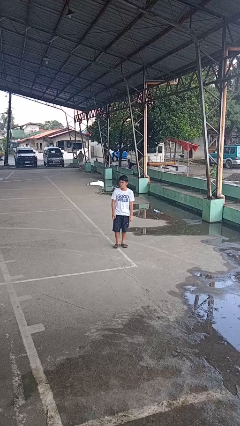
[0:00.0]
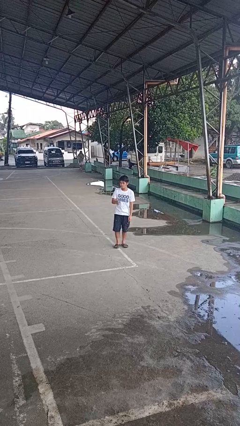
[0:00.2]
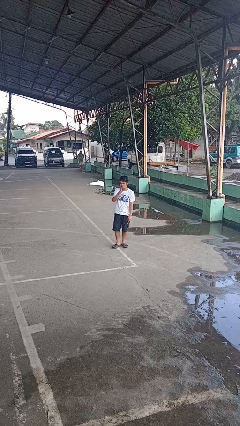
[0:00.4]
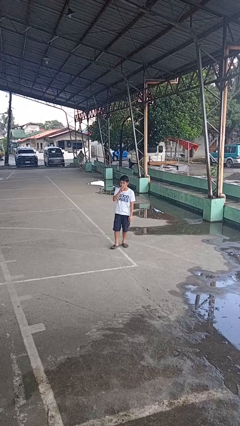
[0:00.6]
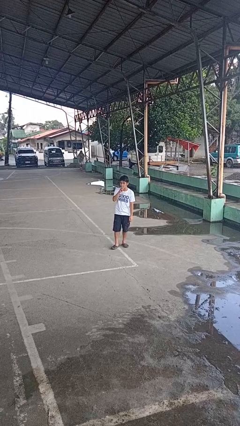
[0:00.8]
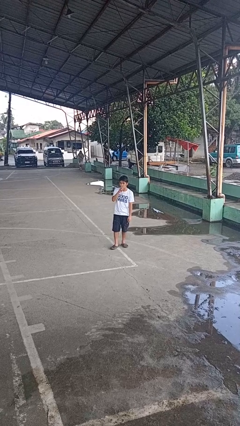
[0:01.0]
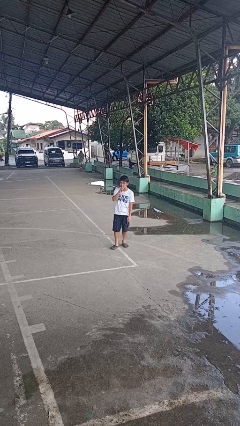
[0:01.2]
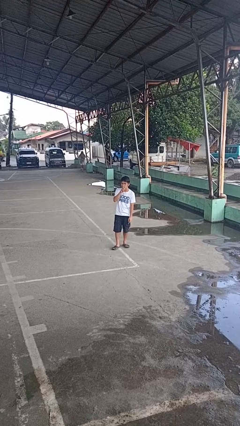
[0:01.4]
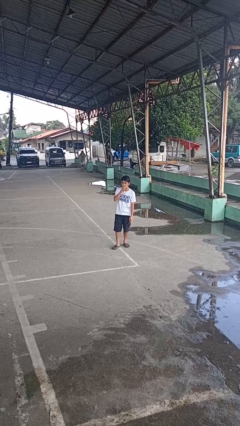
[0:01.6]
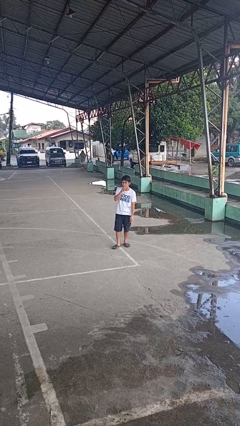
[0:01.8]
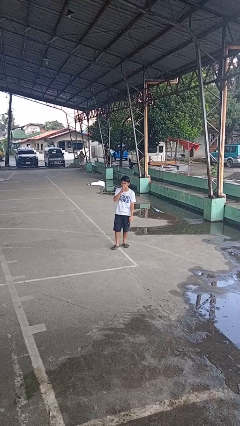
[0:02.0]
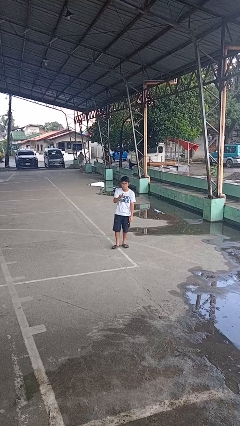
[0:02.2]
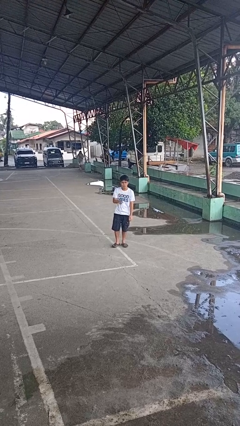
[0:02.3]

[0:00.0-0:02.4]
person gestures be quiet

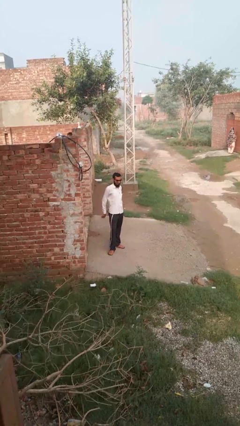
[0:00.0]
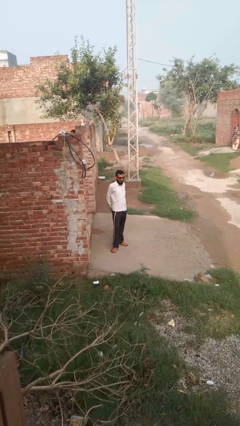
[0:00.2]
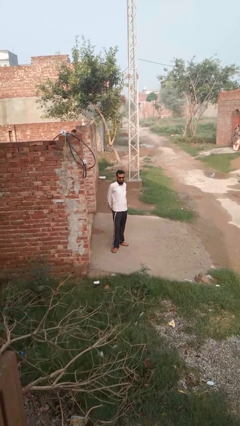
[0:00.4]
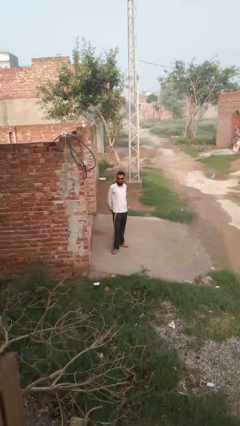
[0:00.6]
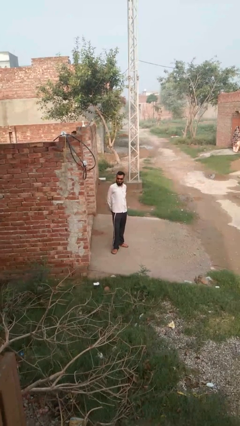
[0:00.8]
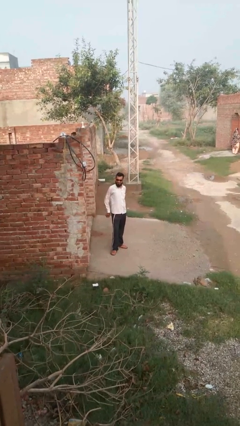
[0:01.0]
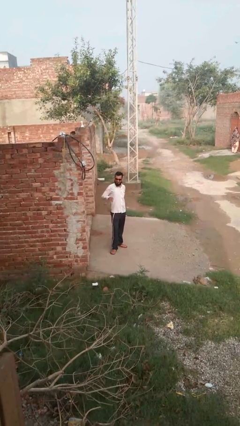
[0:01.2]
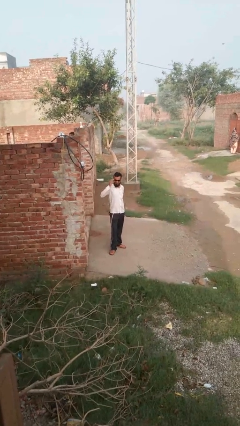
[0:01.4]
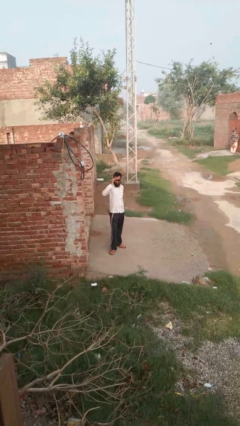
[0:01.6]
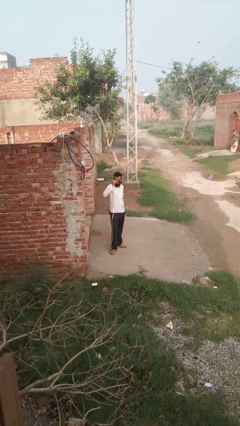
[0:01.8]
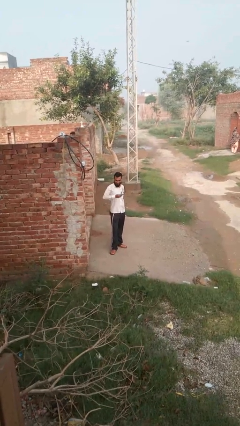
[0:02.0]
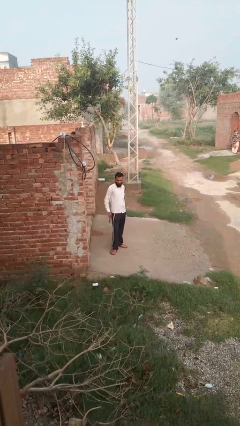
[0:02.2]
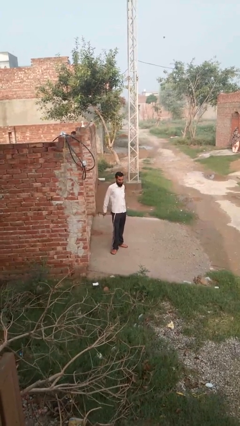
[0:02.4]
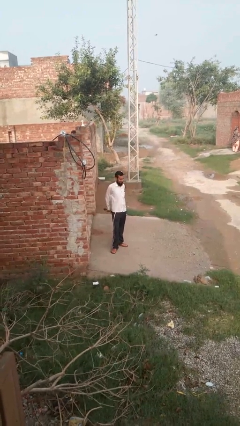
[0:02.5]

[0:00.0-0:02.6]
person takes off glasses

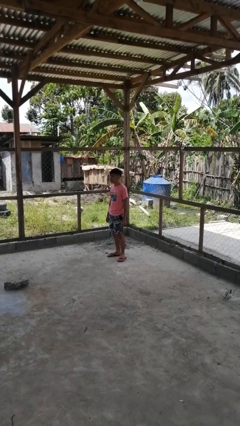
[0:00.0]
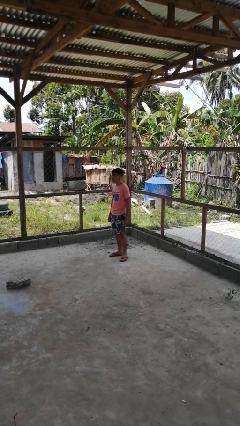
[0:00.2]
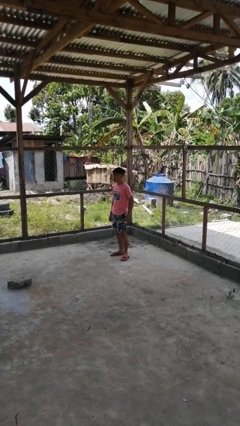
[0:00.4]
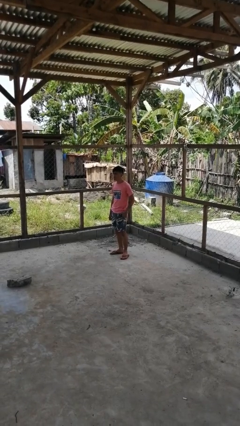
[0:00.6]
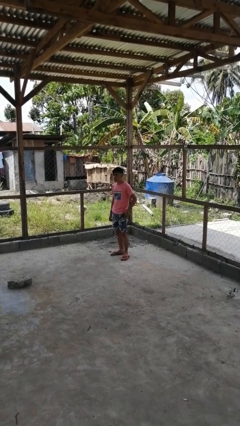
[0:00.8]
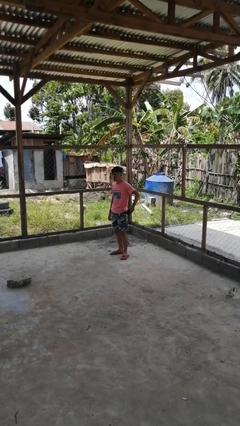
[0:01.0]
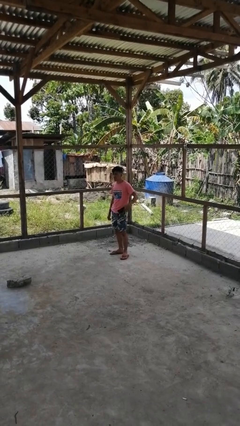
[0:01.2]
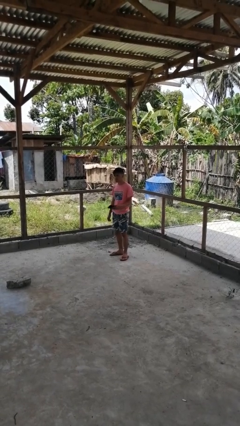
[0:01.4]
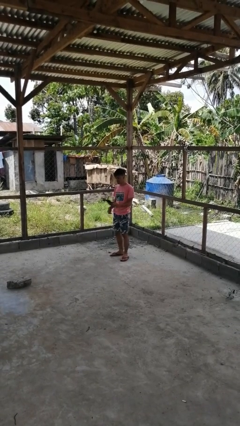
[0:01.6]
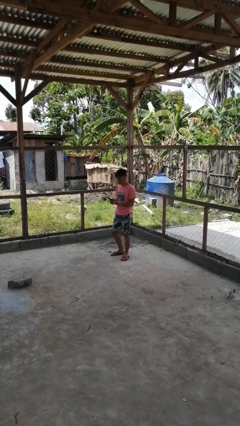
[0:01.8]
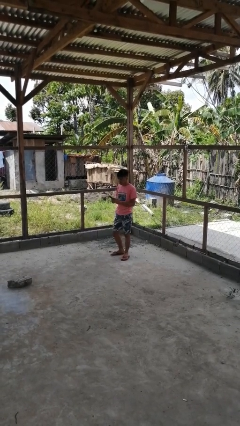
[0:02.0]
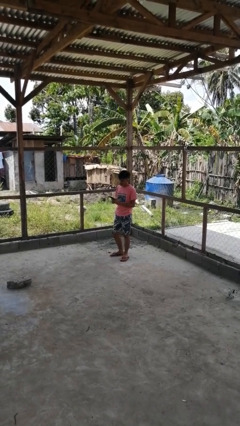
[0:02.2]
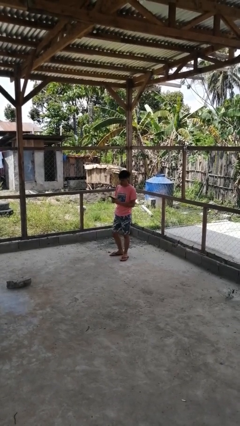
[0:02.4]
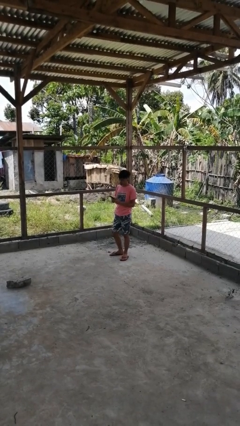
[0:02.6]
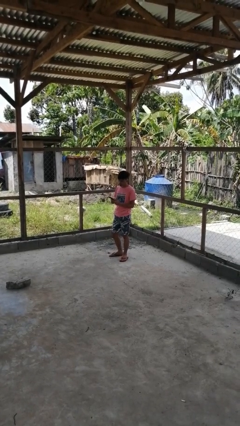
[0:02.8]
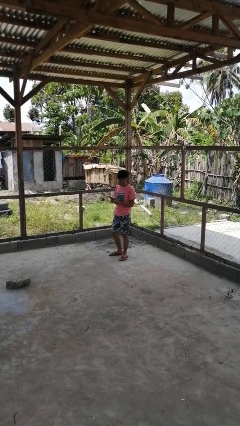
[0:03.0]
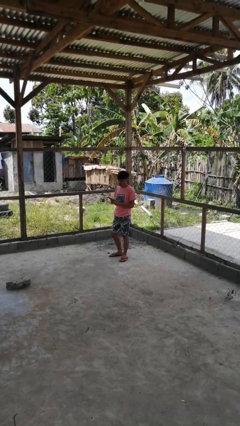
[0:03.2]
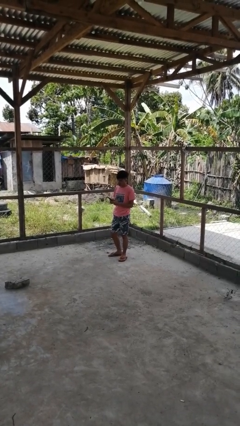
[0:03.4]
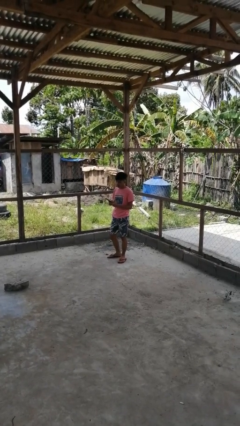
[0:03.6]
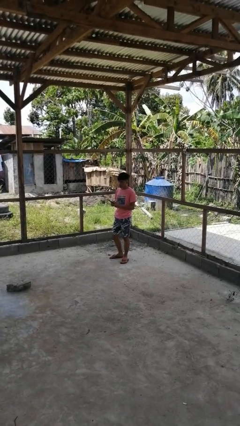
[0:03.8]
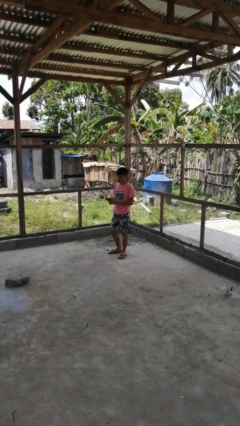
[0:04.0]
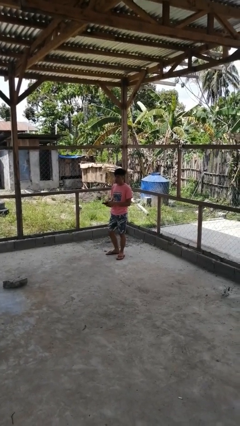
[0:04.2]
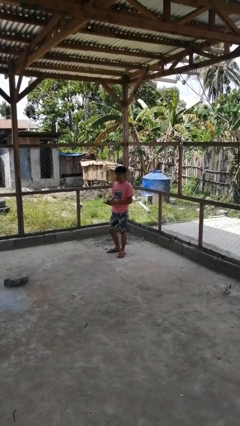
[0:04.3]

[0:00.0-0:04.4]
person takes phone from pocket

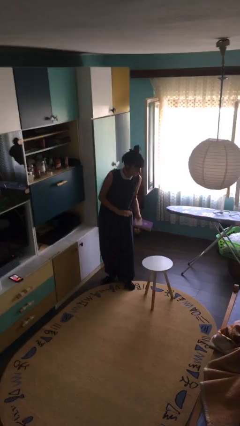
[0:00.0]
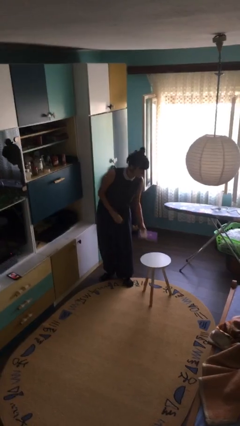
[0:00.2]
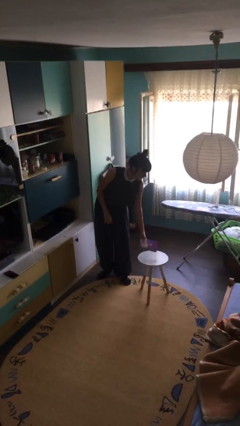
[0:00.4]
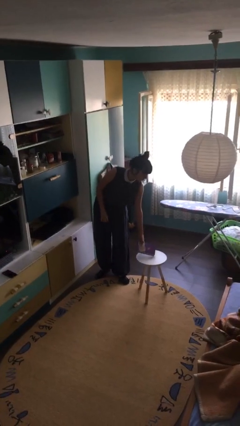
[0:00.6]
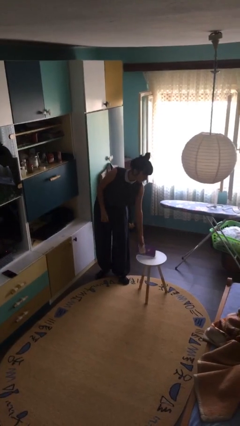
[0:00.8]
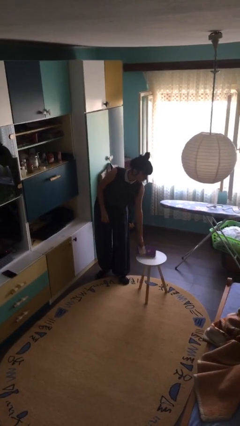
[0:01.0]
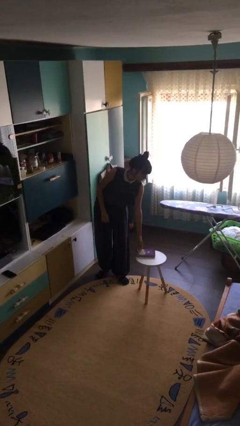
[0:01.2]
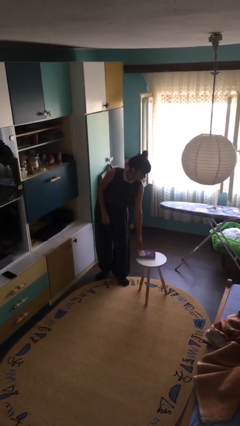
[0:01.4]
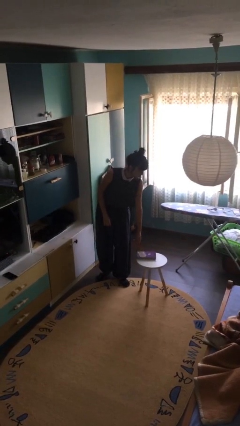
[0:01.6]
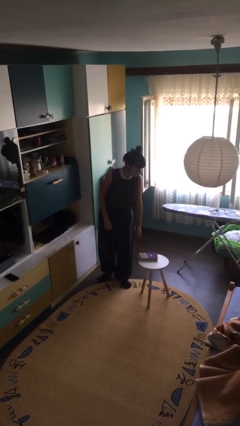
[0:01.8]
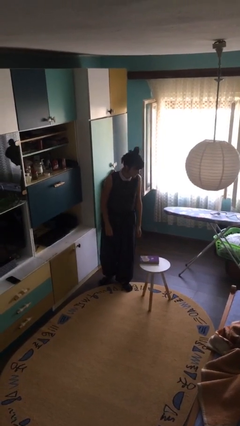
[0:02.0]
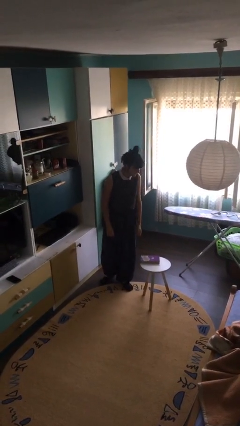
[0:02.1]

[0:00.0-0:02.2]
person puts down object on table

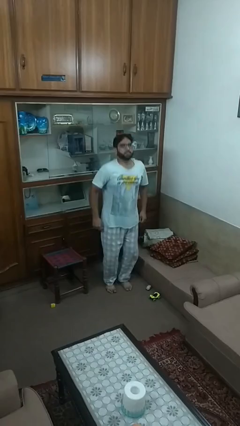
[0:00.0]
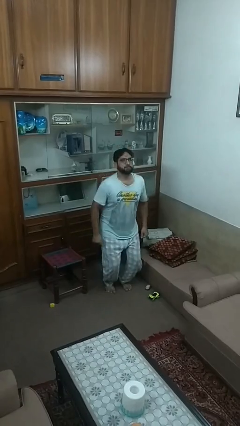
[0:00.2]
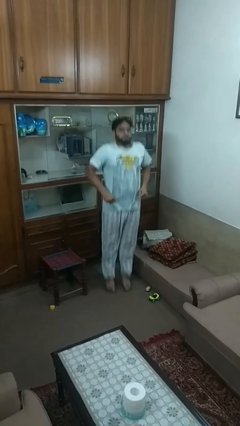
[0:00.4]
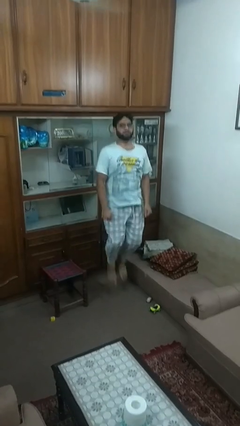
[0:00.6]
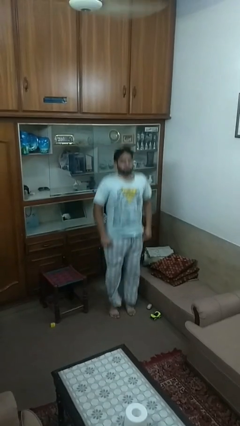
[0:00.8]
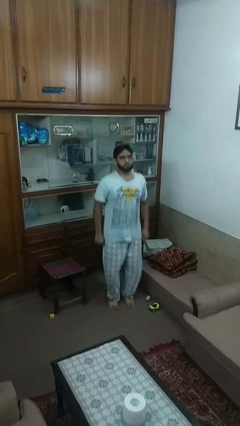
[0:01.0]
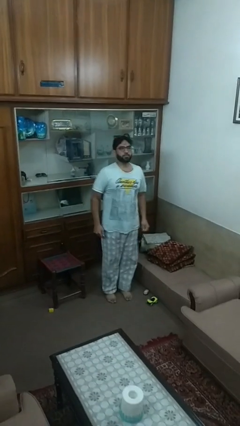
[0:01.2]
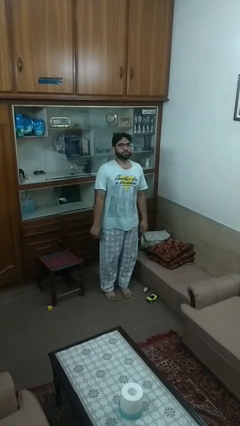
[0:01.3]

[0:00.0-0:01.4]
person jumps

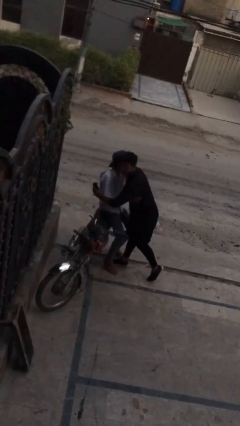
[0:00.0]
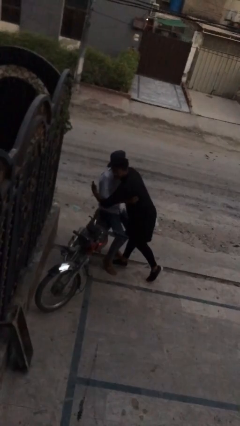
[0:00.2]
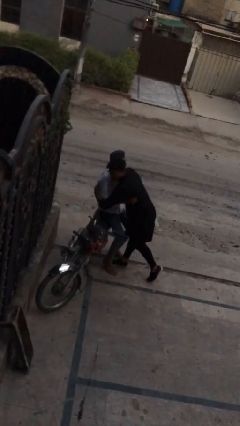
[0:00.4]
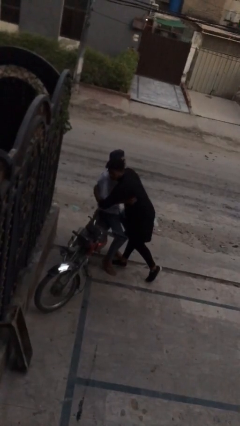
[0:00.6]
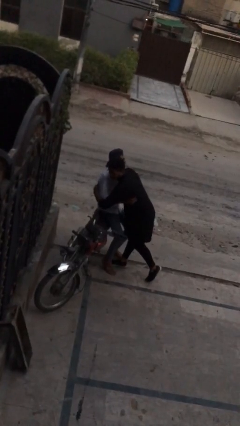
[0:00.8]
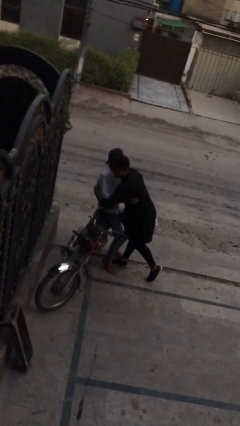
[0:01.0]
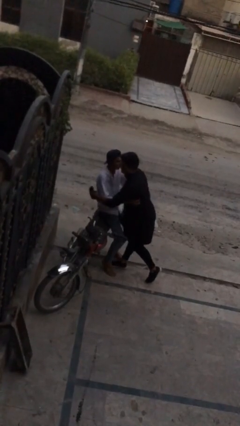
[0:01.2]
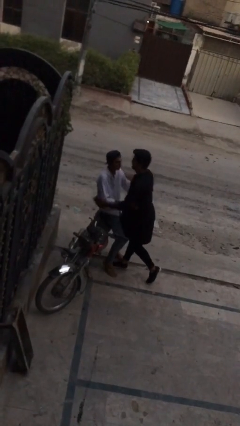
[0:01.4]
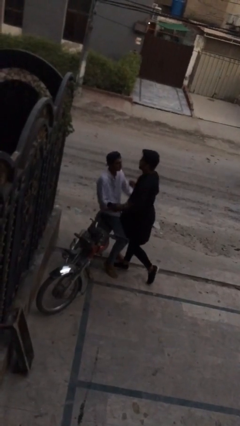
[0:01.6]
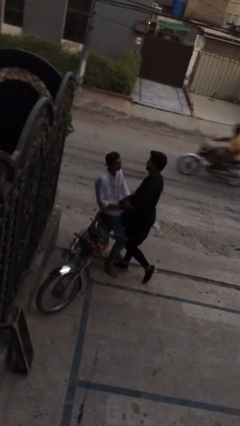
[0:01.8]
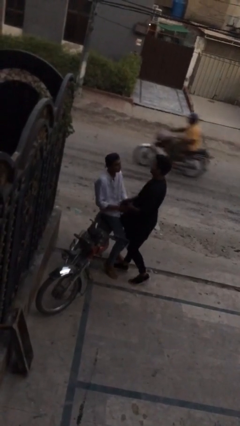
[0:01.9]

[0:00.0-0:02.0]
person embraces person

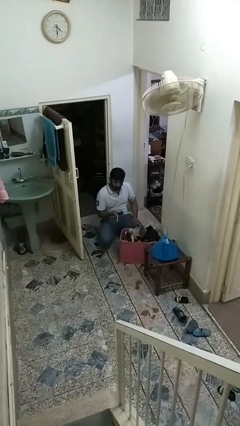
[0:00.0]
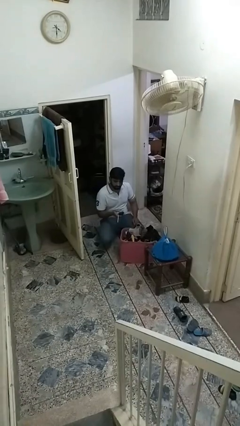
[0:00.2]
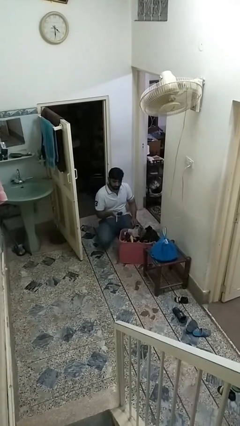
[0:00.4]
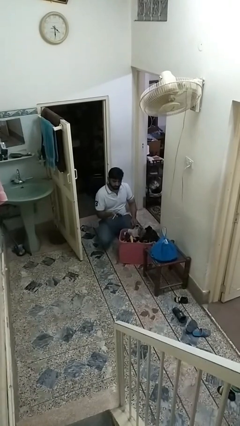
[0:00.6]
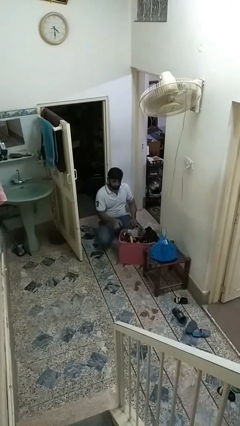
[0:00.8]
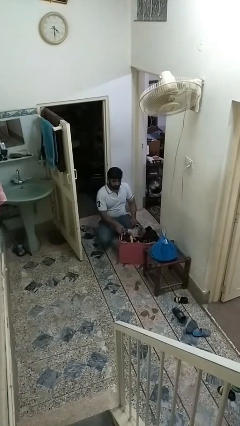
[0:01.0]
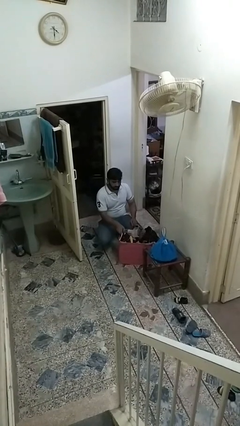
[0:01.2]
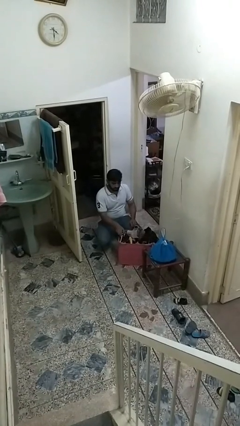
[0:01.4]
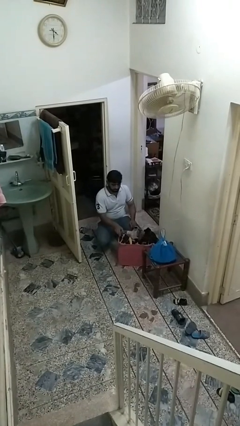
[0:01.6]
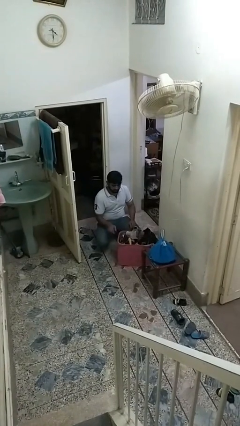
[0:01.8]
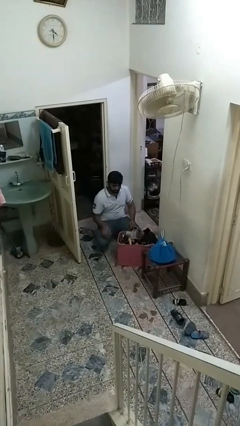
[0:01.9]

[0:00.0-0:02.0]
person puts object into basket
